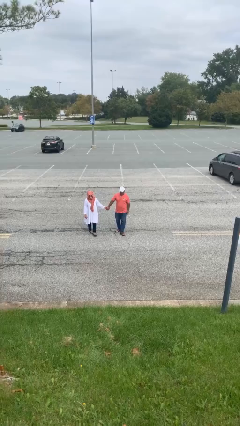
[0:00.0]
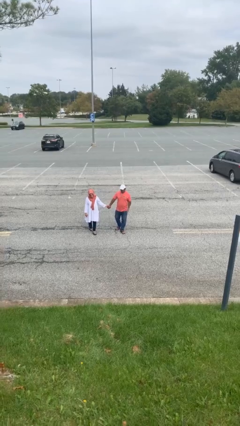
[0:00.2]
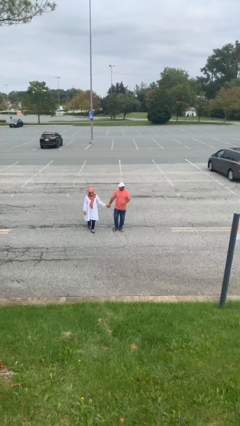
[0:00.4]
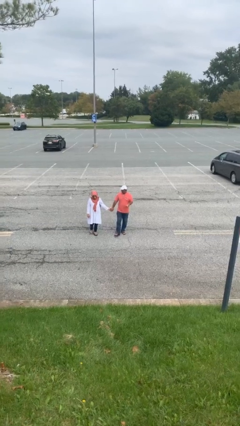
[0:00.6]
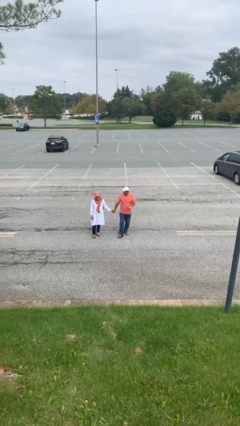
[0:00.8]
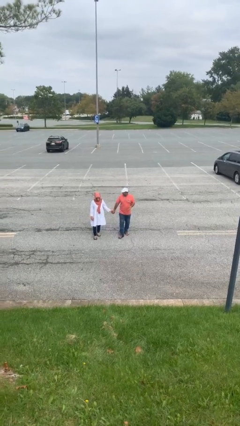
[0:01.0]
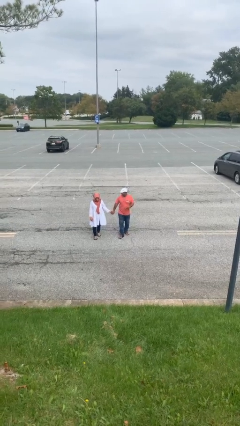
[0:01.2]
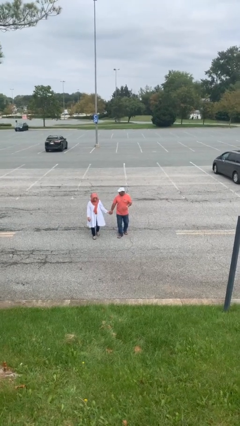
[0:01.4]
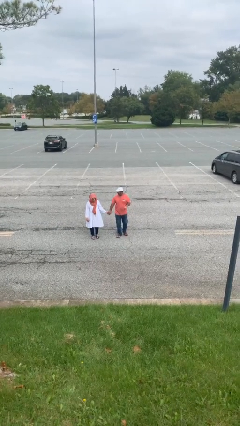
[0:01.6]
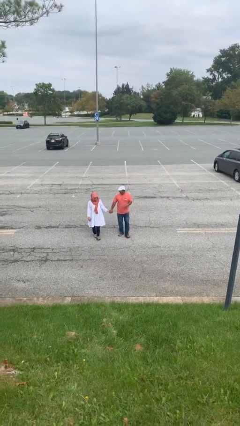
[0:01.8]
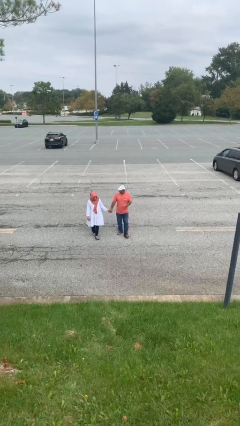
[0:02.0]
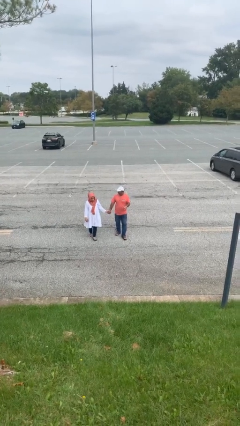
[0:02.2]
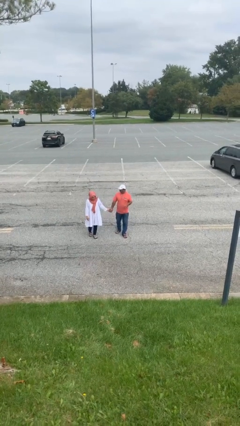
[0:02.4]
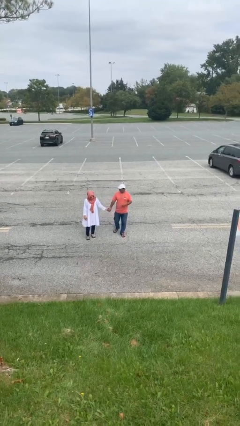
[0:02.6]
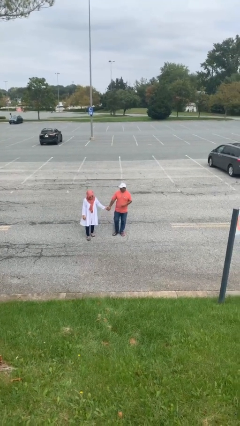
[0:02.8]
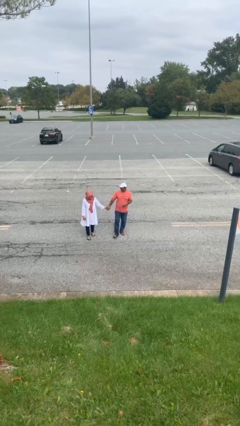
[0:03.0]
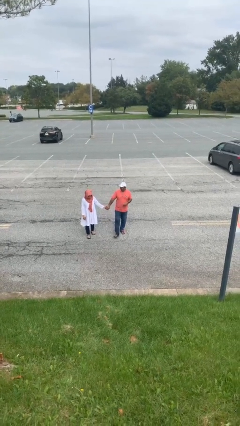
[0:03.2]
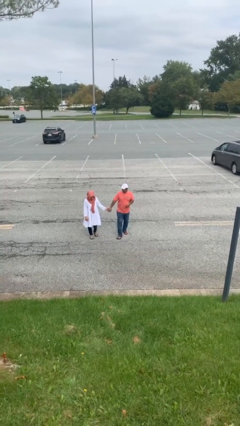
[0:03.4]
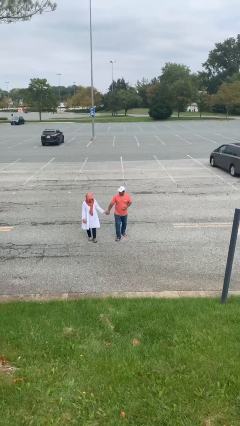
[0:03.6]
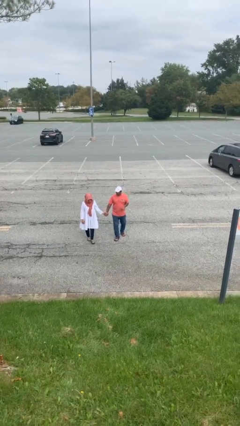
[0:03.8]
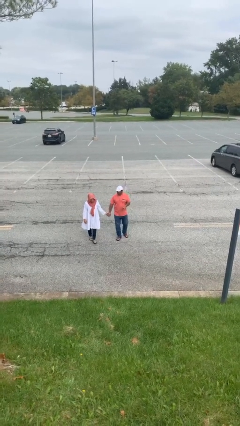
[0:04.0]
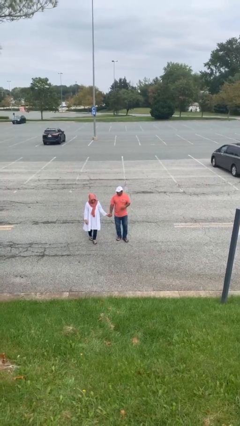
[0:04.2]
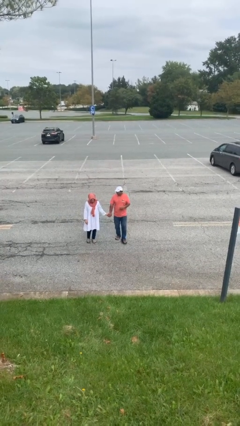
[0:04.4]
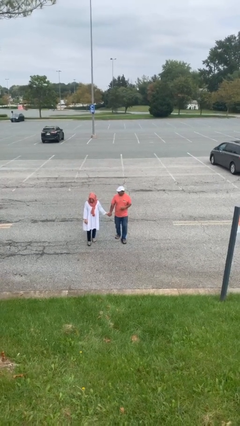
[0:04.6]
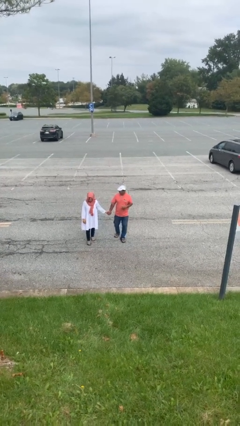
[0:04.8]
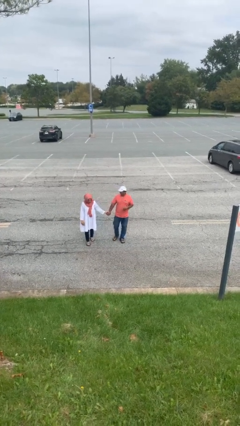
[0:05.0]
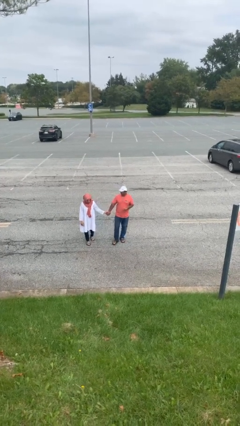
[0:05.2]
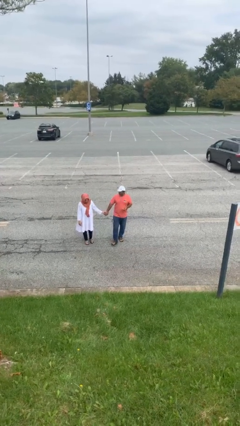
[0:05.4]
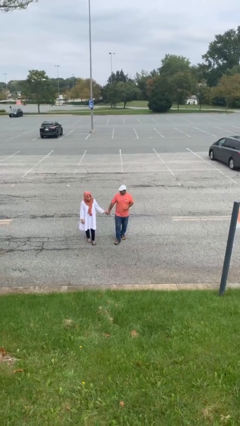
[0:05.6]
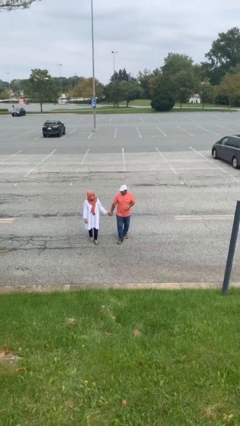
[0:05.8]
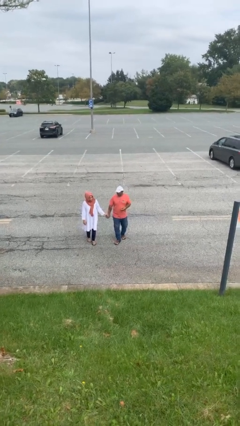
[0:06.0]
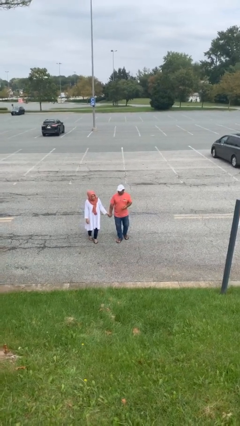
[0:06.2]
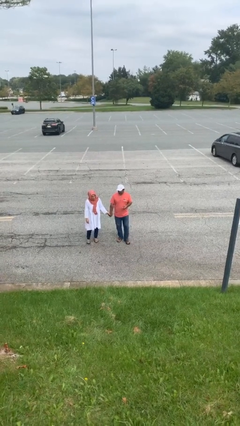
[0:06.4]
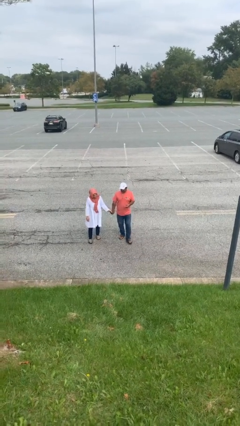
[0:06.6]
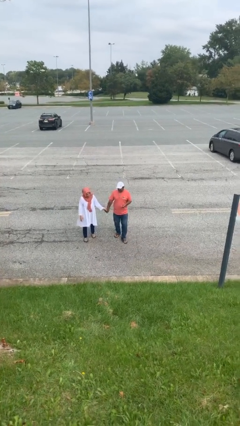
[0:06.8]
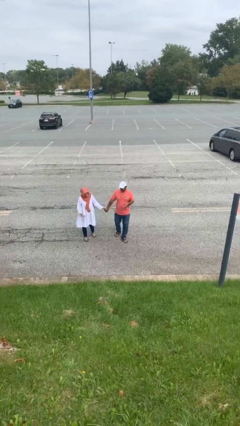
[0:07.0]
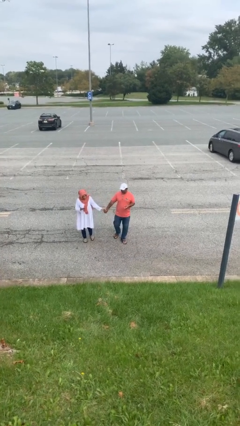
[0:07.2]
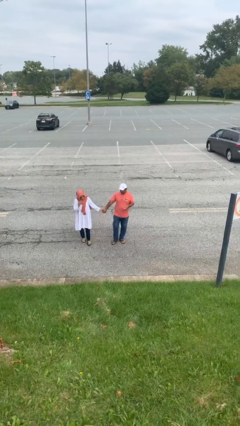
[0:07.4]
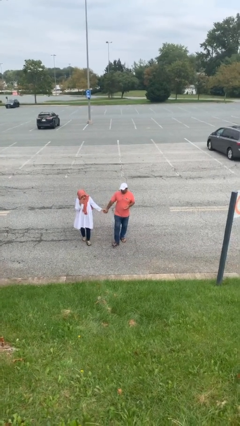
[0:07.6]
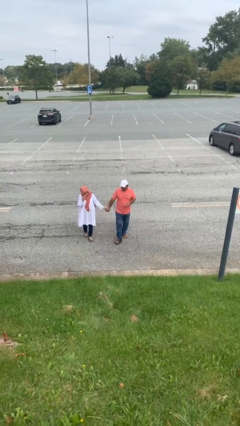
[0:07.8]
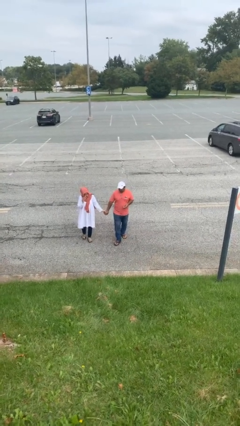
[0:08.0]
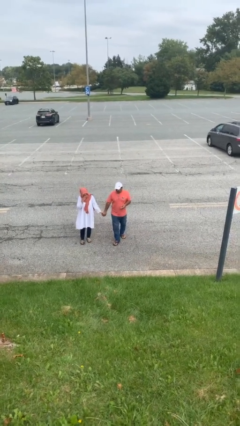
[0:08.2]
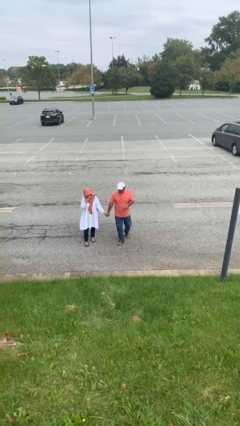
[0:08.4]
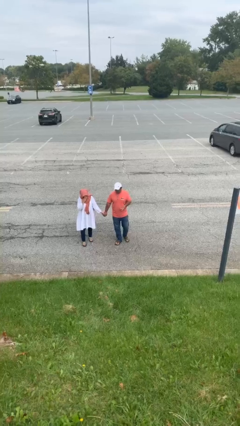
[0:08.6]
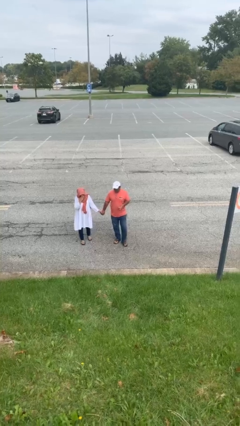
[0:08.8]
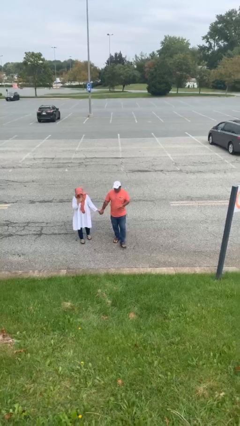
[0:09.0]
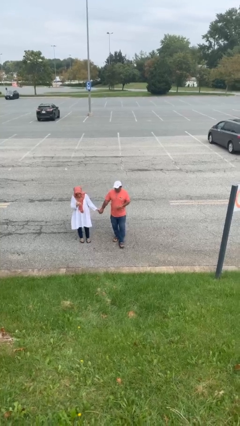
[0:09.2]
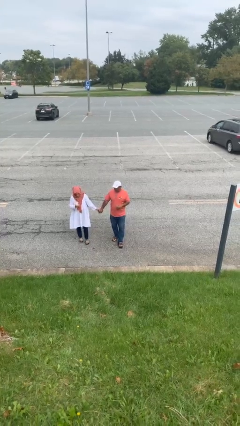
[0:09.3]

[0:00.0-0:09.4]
person holds hand

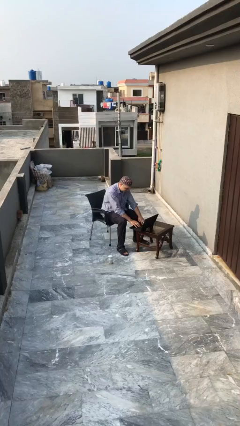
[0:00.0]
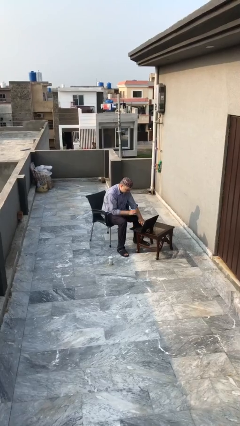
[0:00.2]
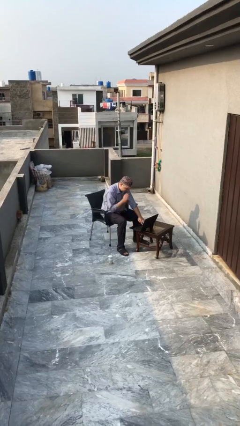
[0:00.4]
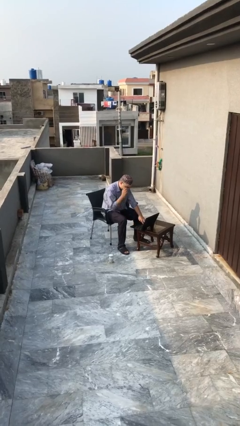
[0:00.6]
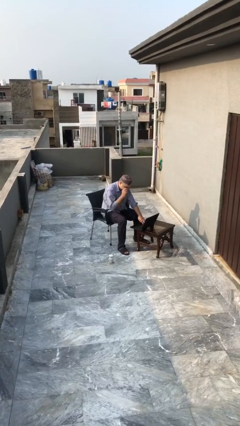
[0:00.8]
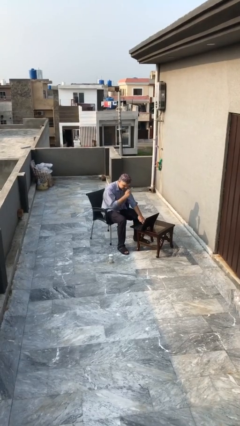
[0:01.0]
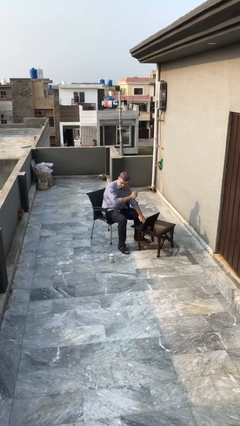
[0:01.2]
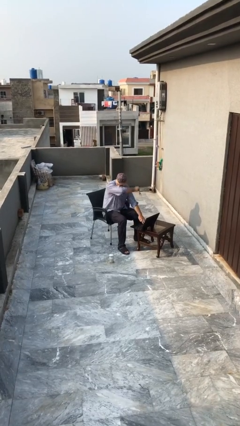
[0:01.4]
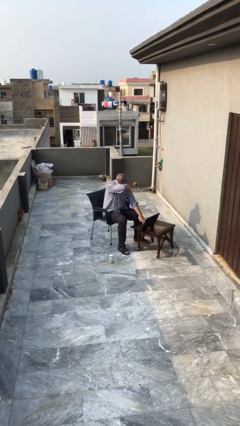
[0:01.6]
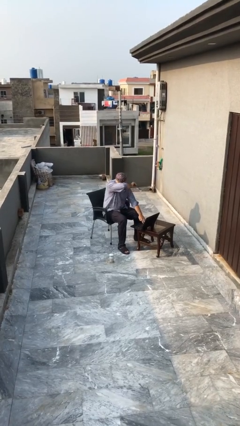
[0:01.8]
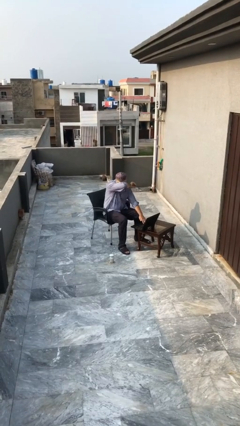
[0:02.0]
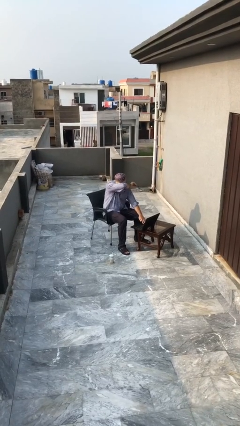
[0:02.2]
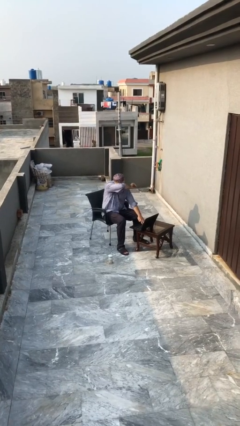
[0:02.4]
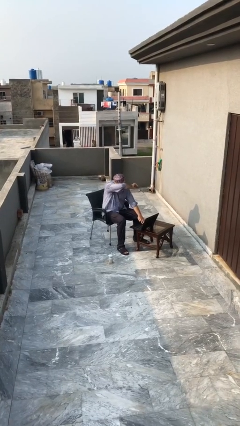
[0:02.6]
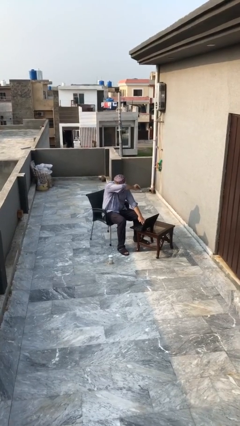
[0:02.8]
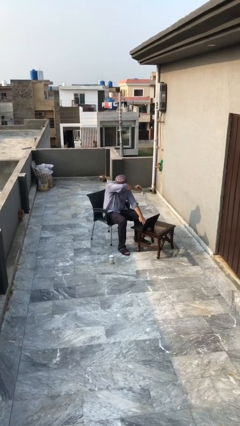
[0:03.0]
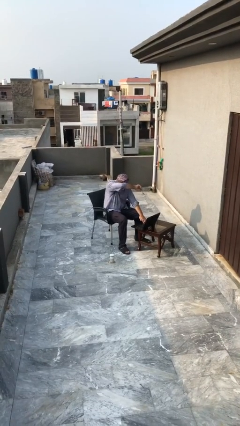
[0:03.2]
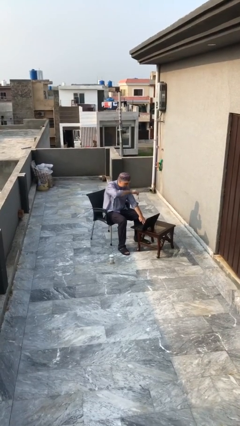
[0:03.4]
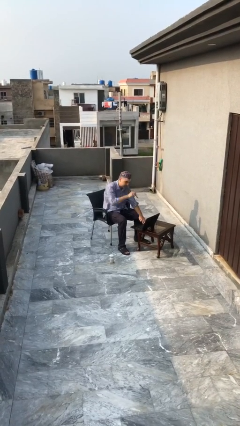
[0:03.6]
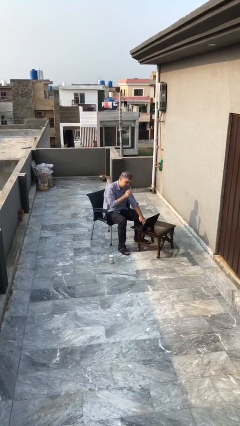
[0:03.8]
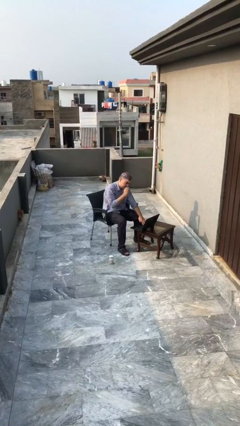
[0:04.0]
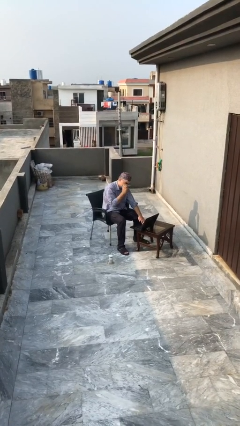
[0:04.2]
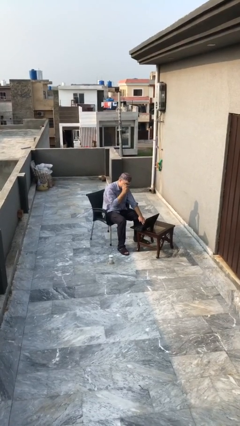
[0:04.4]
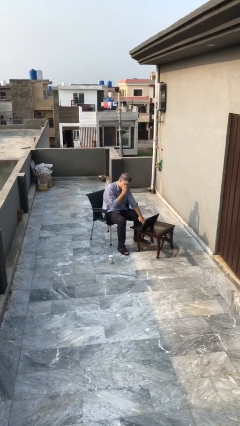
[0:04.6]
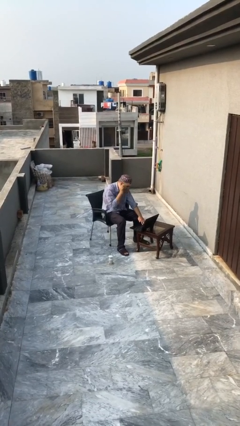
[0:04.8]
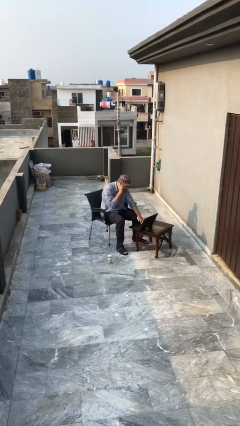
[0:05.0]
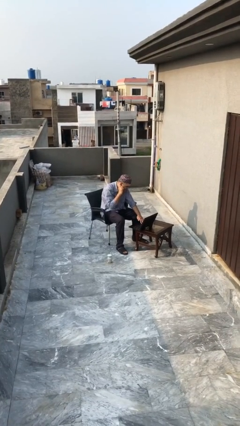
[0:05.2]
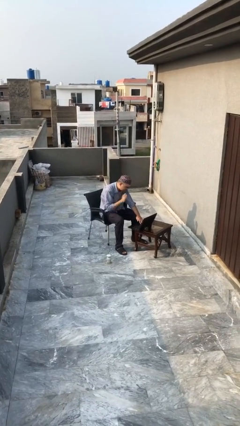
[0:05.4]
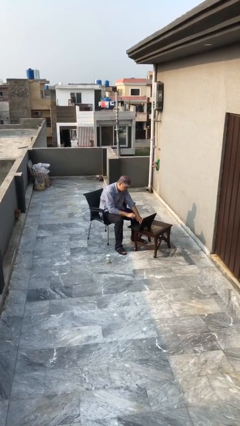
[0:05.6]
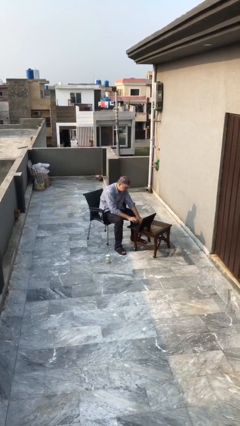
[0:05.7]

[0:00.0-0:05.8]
person interacts with laptop

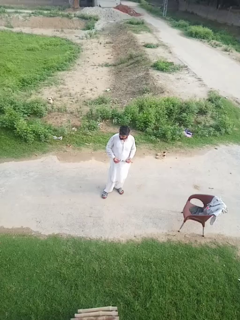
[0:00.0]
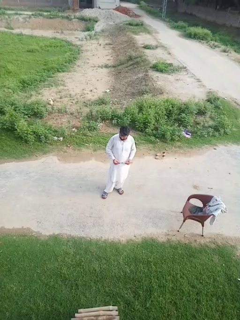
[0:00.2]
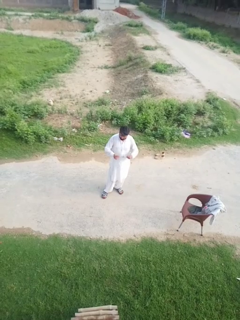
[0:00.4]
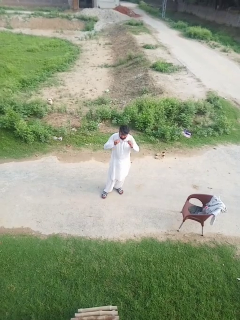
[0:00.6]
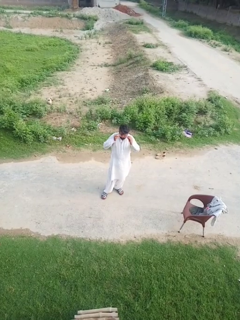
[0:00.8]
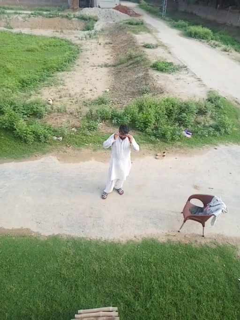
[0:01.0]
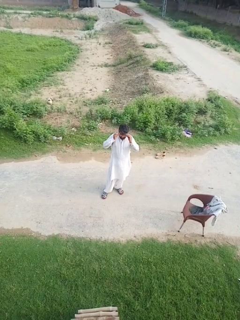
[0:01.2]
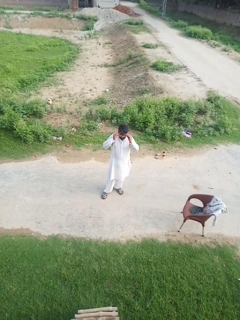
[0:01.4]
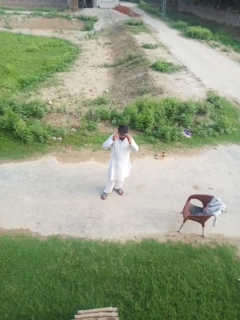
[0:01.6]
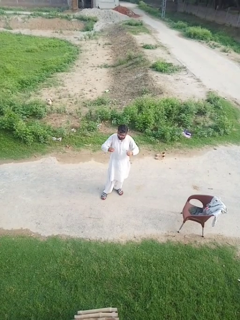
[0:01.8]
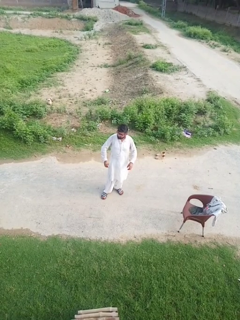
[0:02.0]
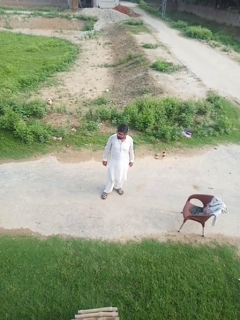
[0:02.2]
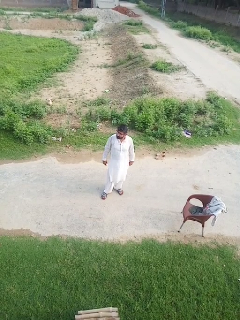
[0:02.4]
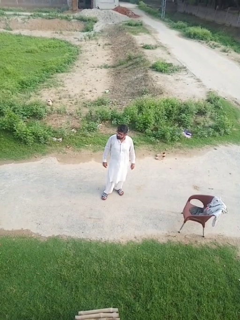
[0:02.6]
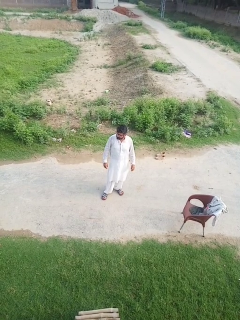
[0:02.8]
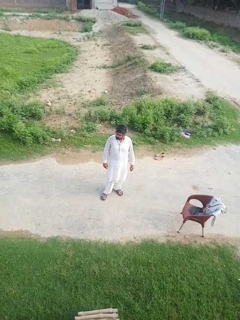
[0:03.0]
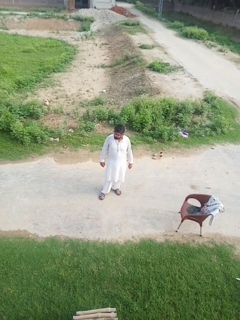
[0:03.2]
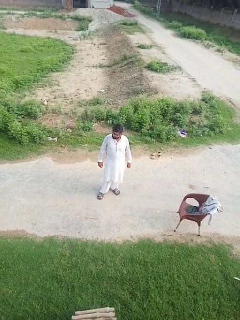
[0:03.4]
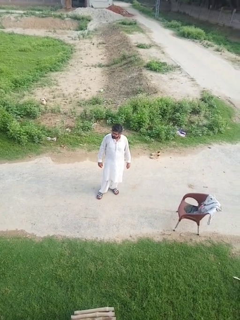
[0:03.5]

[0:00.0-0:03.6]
person puts on glasses

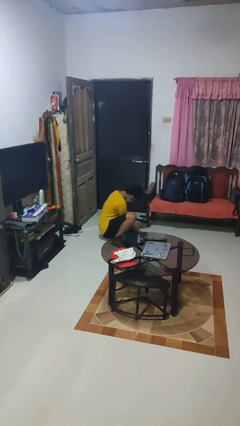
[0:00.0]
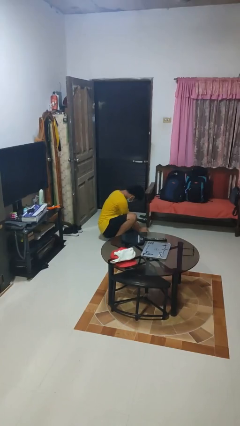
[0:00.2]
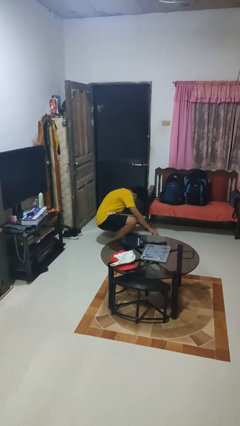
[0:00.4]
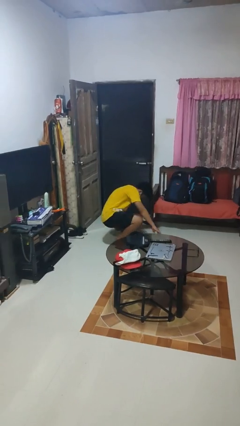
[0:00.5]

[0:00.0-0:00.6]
person lies down on floor
